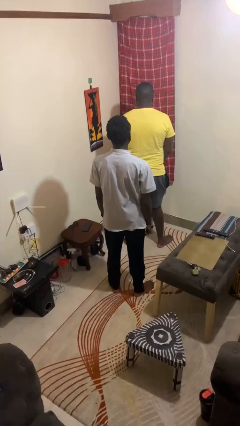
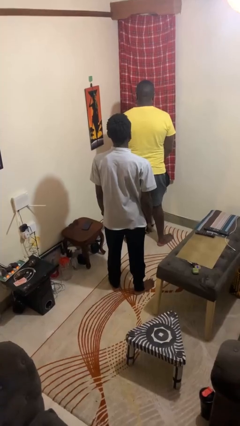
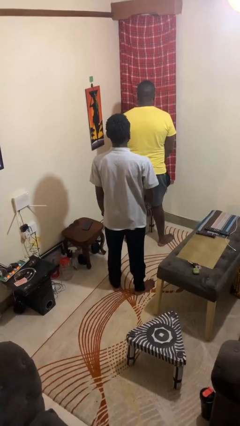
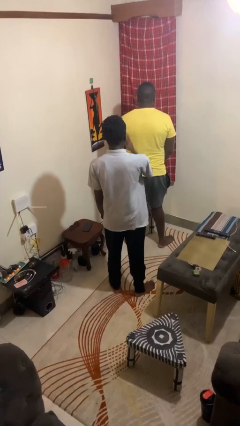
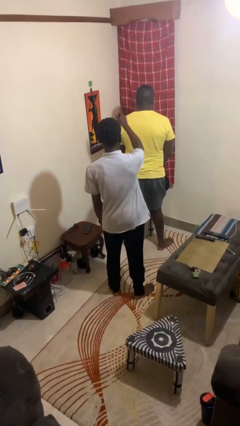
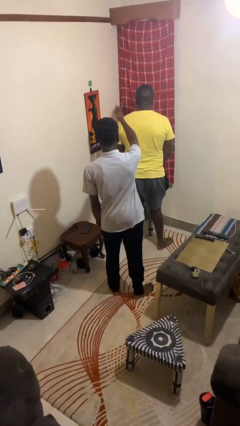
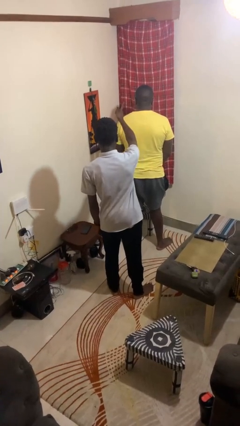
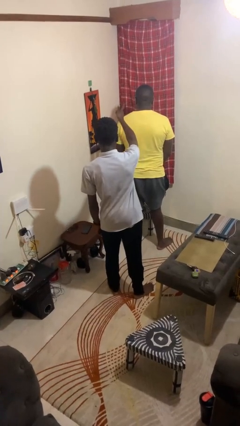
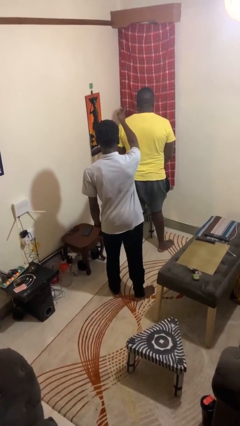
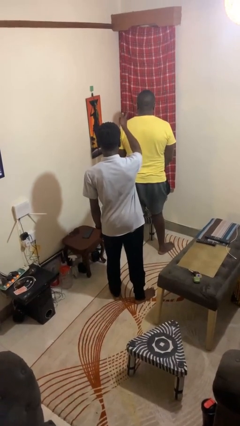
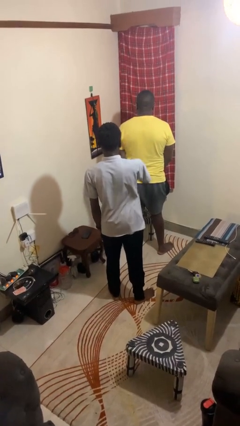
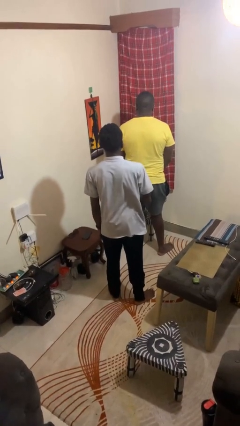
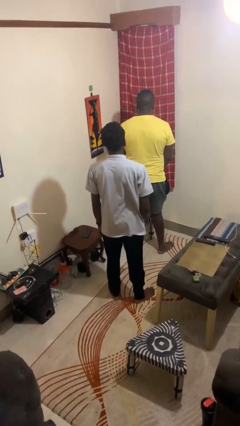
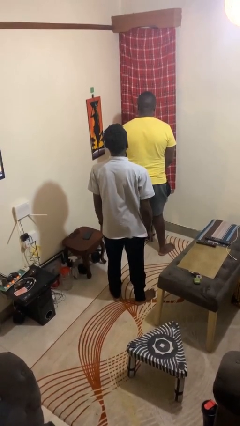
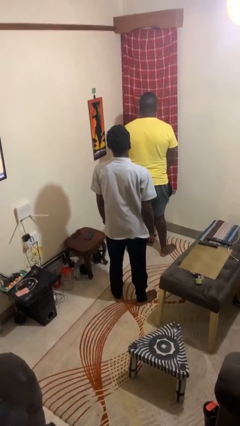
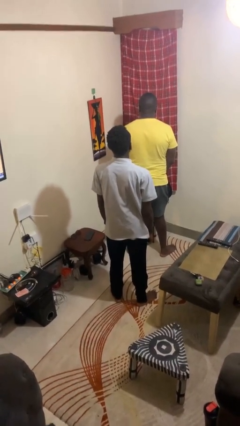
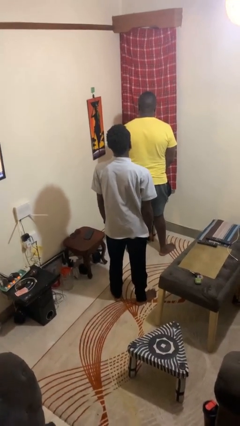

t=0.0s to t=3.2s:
person points at person

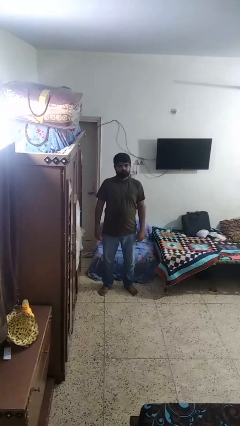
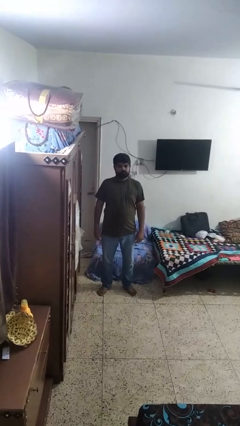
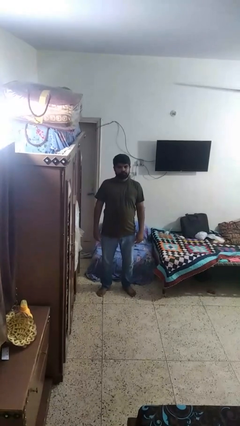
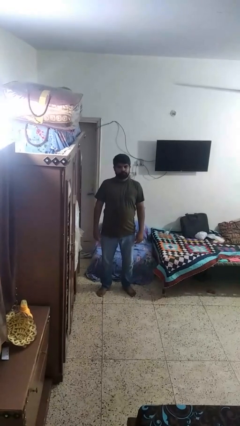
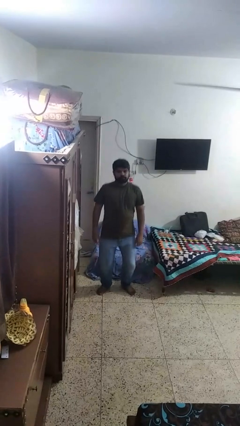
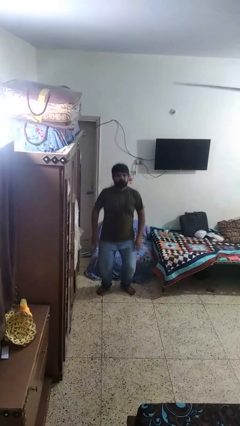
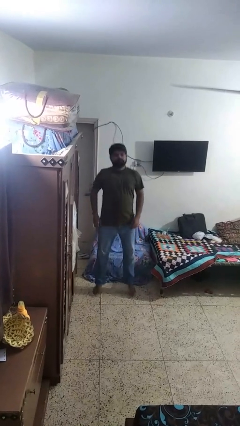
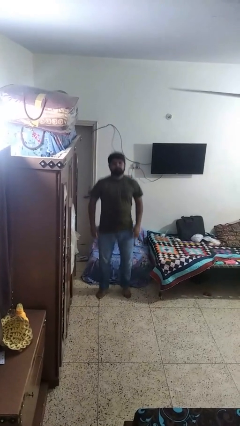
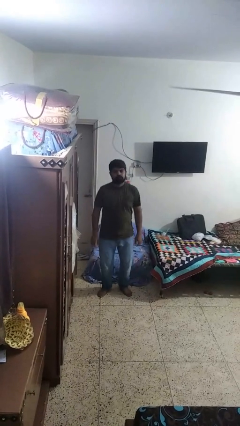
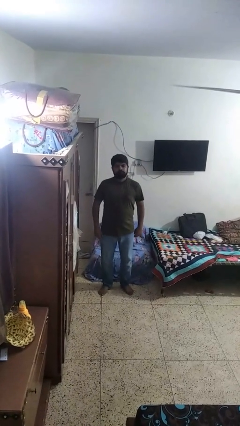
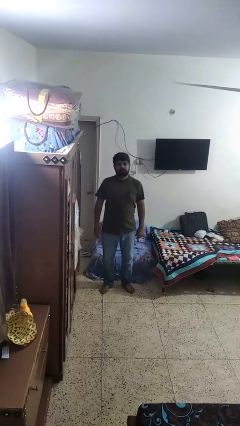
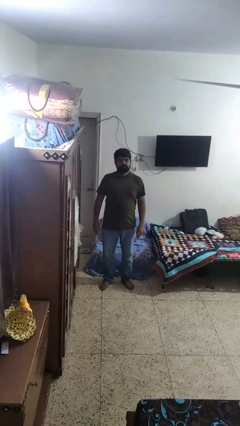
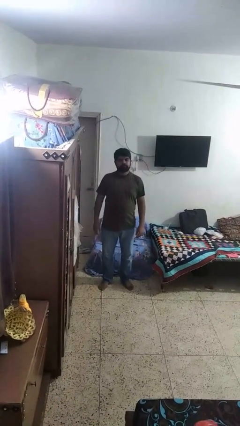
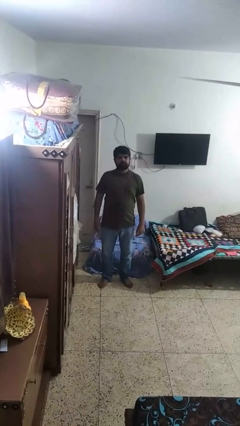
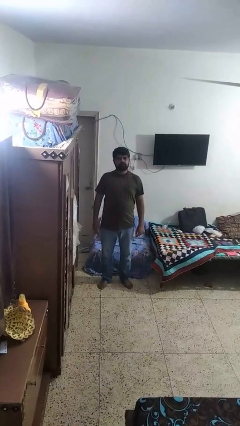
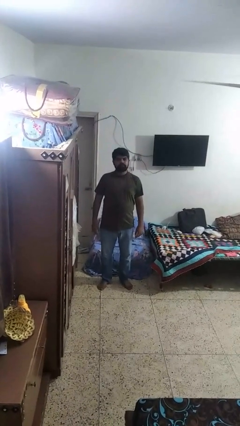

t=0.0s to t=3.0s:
person jumps

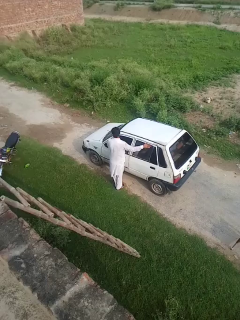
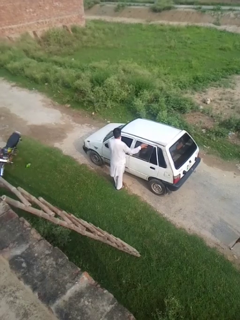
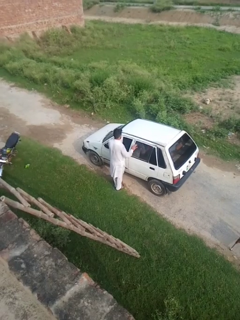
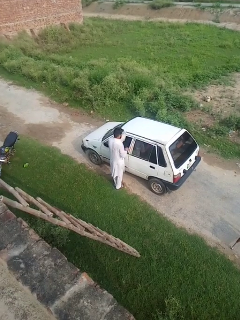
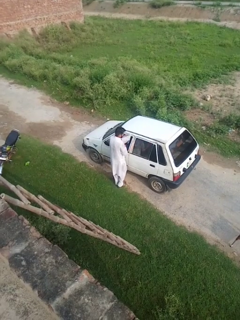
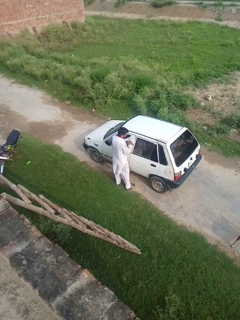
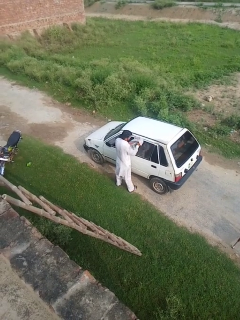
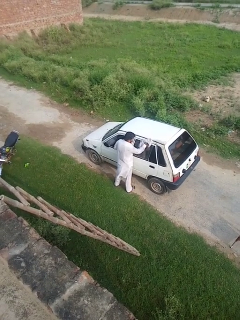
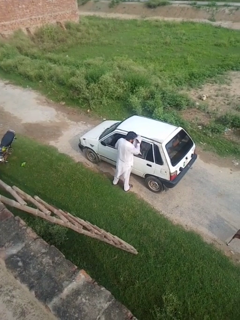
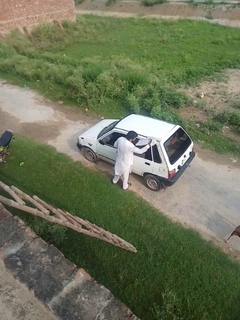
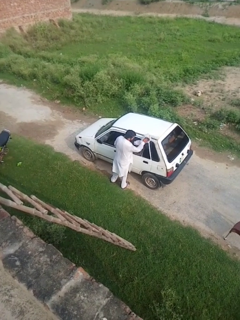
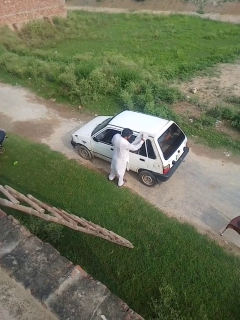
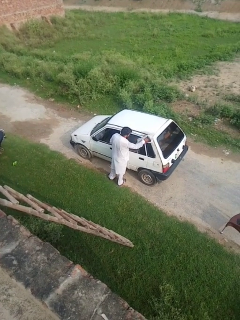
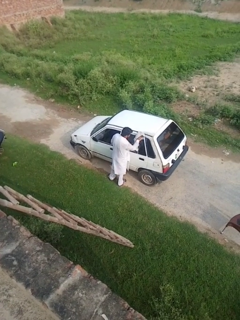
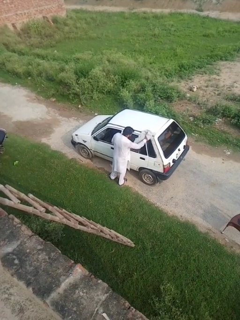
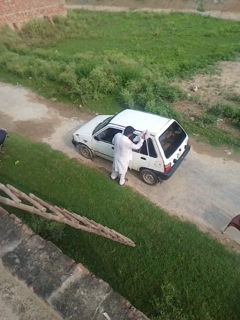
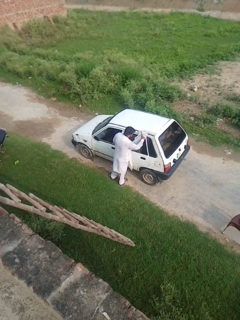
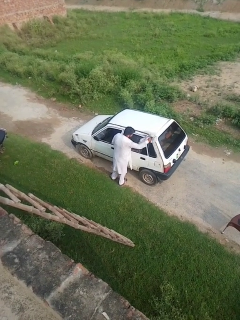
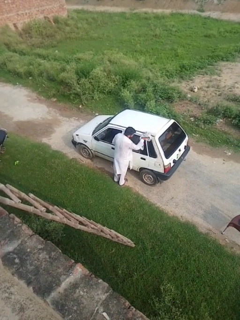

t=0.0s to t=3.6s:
person polishes car with rag

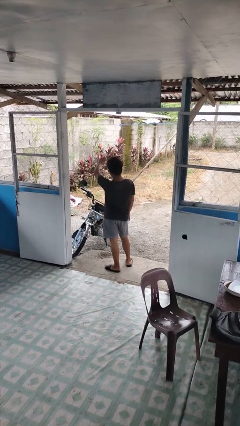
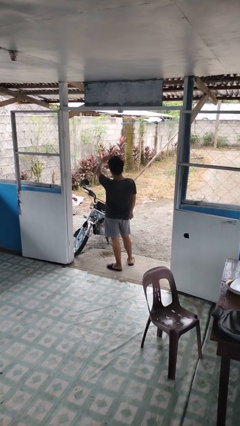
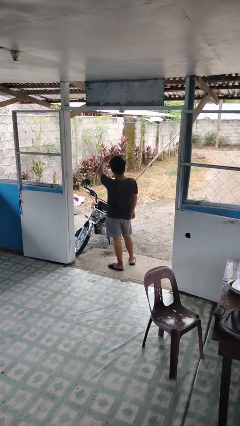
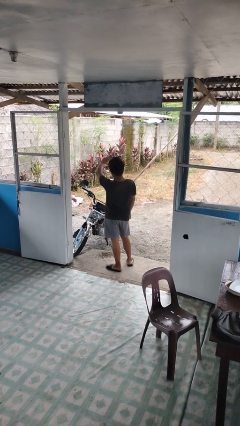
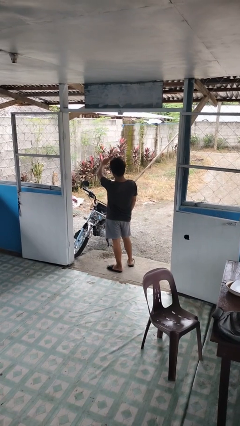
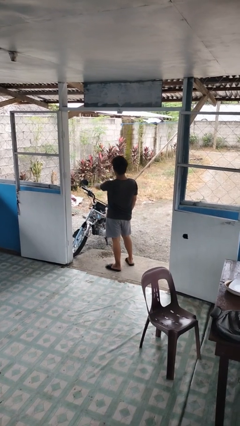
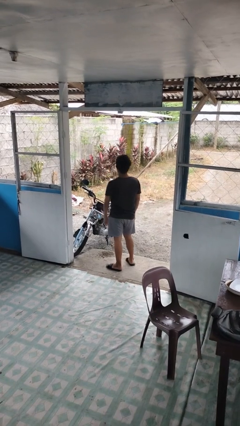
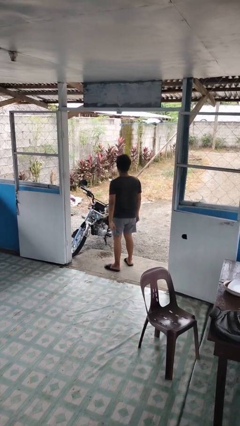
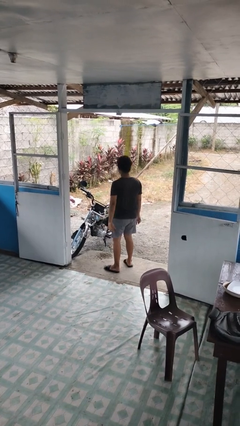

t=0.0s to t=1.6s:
person gestures thumbs down

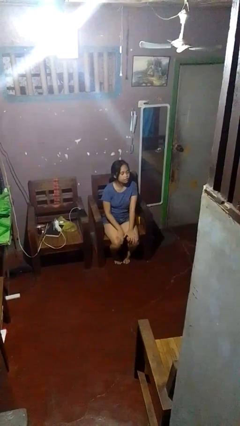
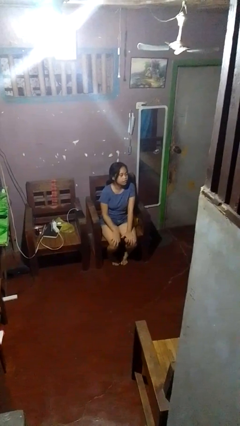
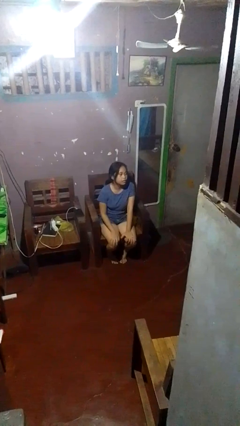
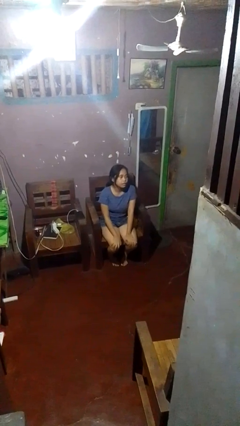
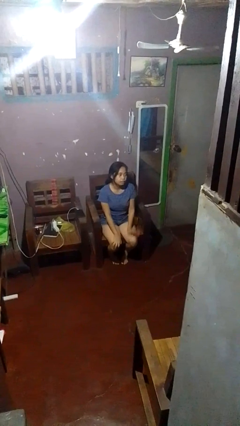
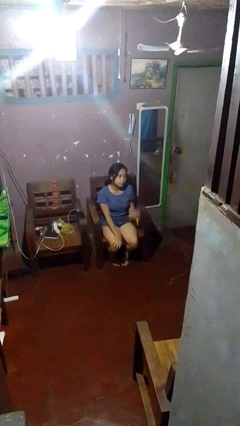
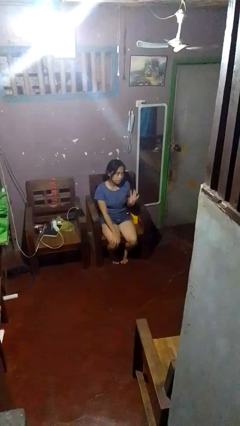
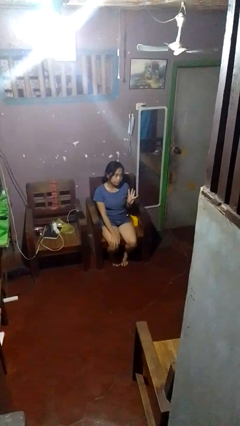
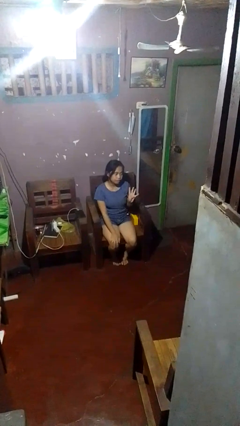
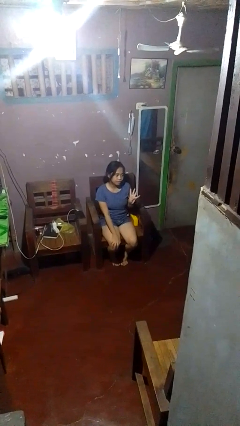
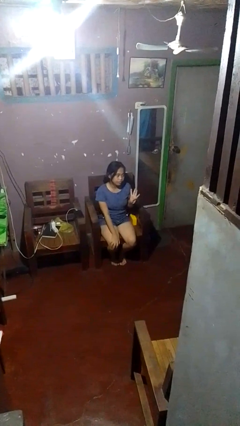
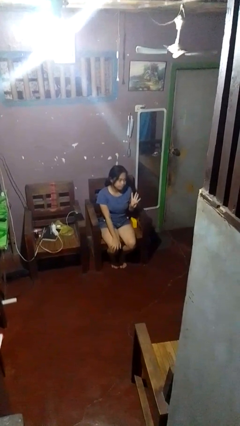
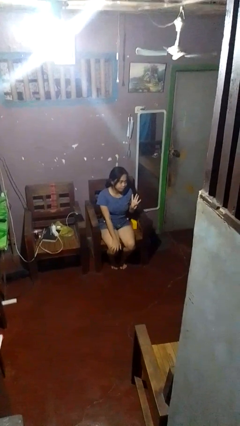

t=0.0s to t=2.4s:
person gestures number four

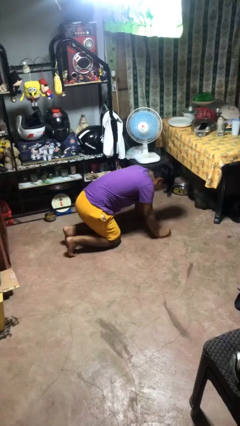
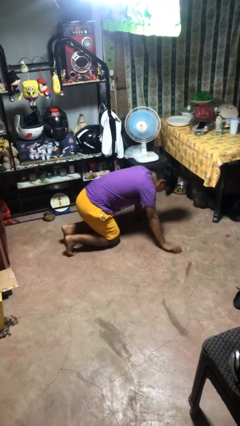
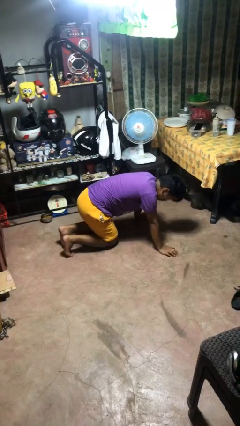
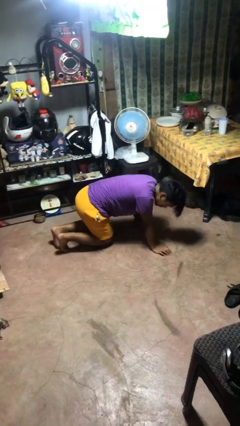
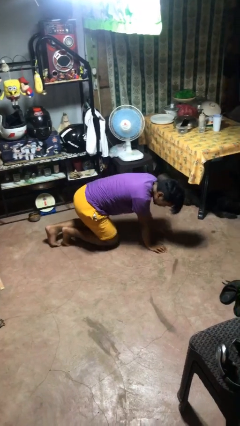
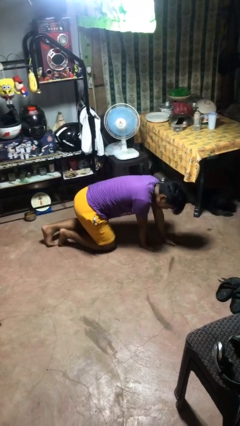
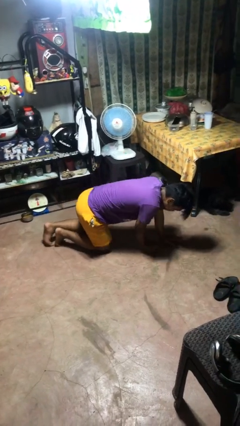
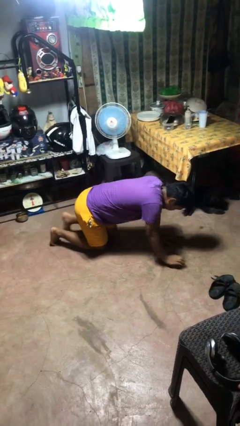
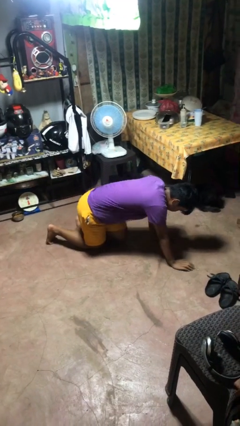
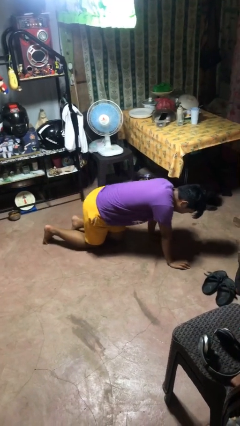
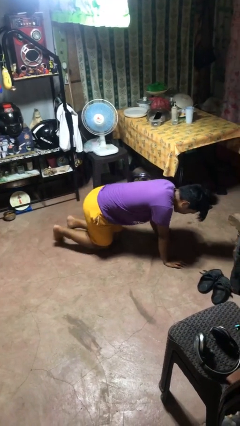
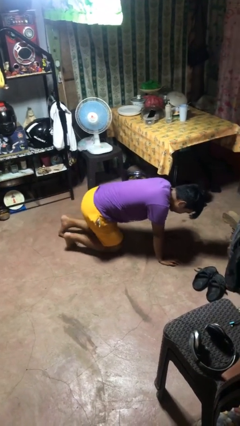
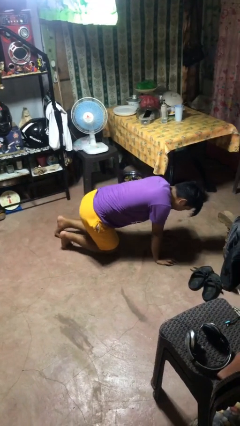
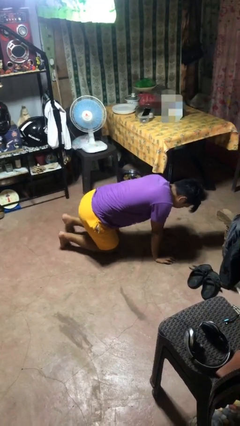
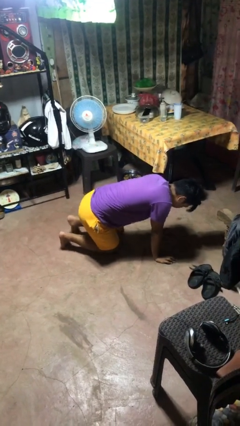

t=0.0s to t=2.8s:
person crawls

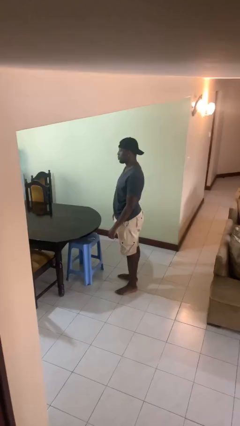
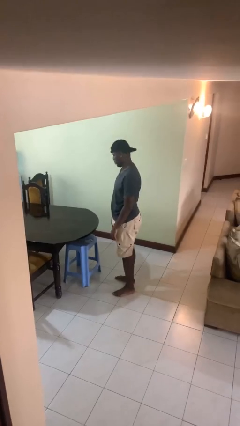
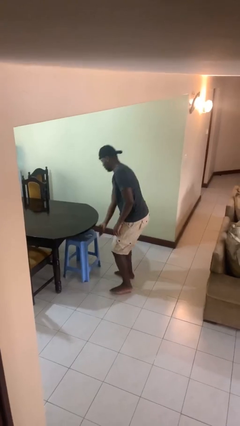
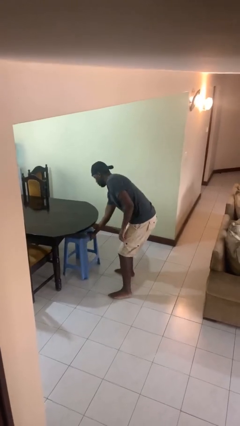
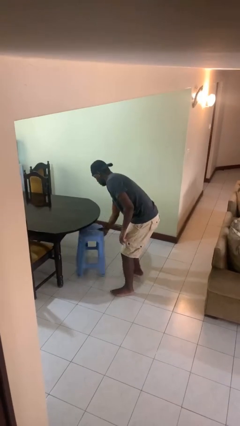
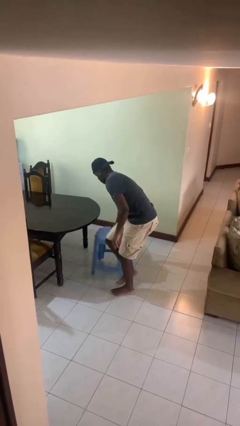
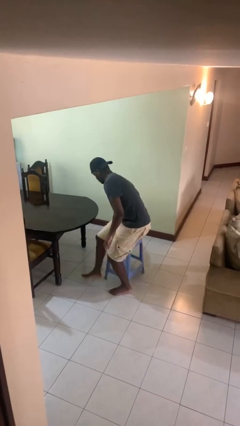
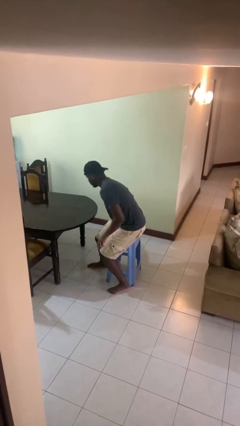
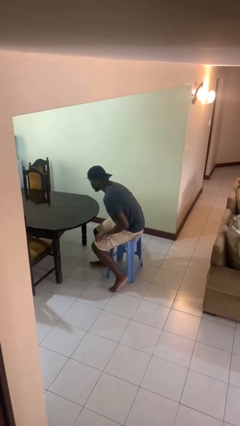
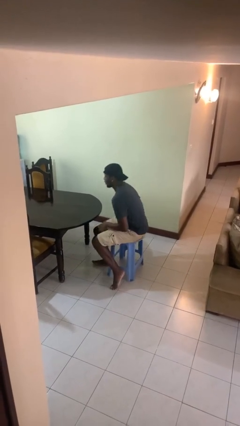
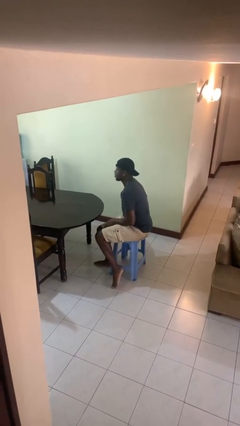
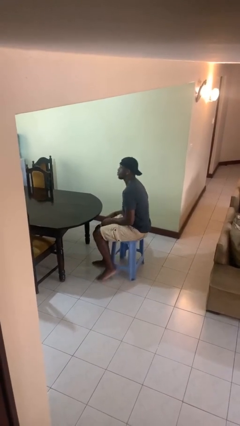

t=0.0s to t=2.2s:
person sits down
